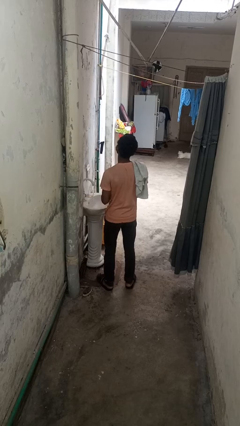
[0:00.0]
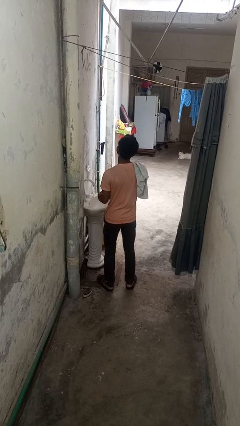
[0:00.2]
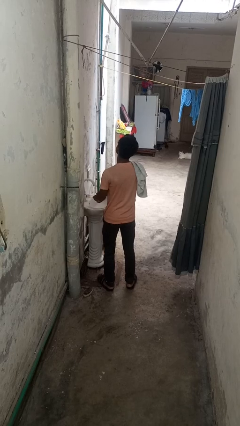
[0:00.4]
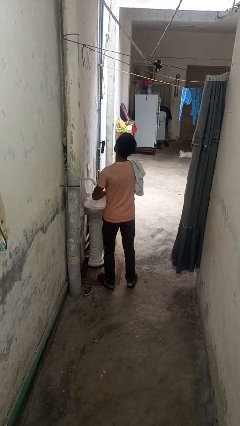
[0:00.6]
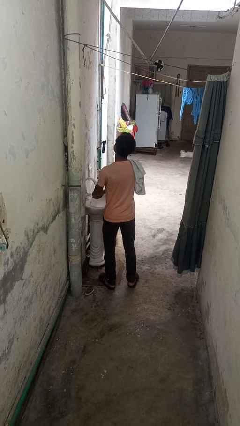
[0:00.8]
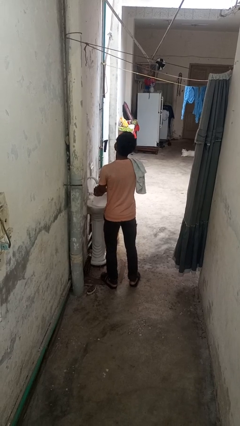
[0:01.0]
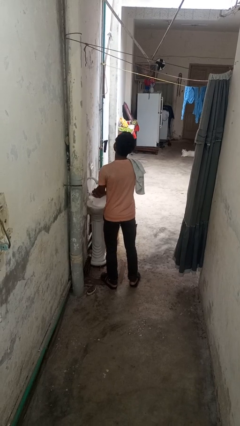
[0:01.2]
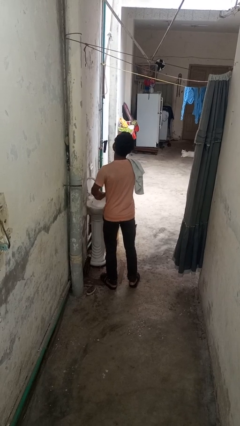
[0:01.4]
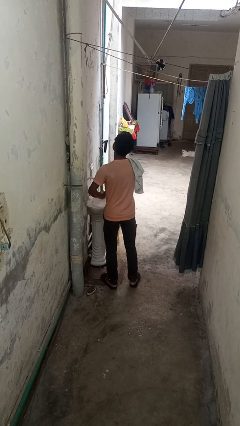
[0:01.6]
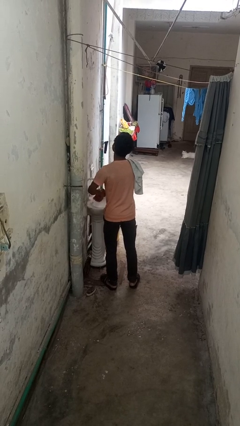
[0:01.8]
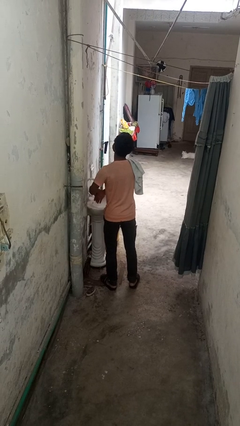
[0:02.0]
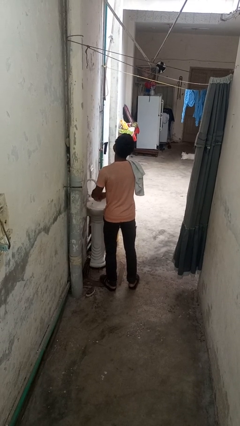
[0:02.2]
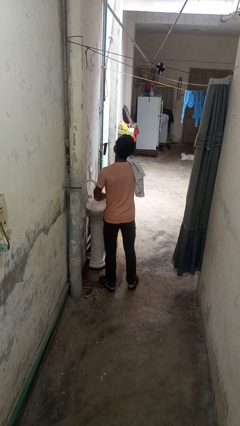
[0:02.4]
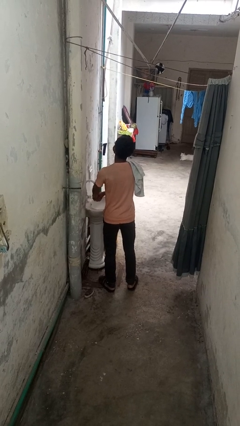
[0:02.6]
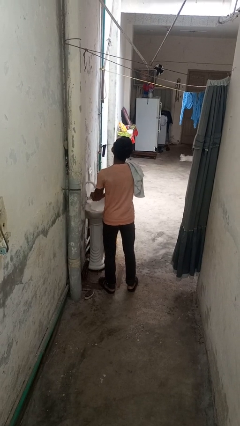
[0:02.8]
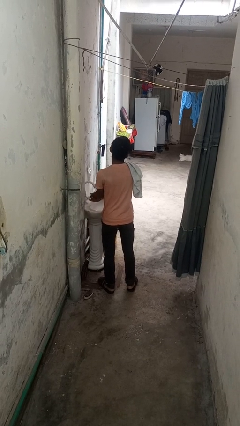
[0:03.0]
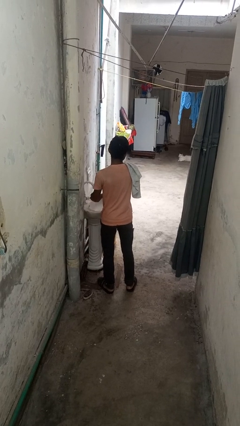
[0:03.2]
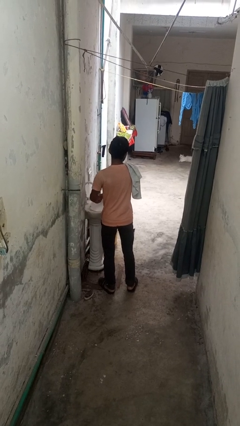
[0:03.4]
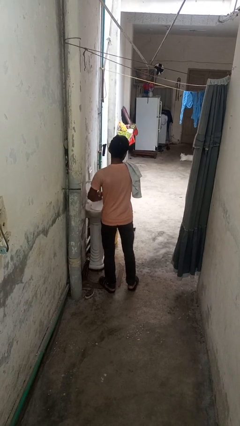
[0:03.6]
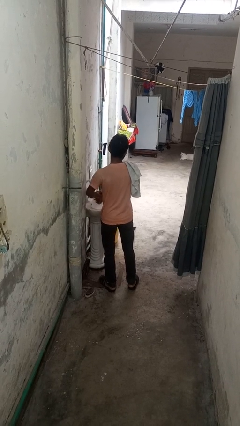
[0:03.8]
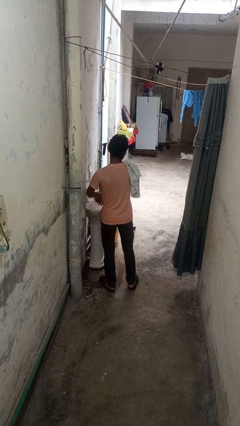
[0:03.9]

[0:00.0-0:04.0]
person washes hands

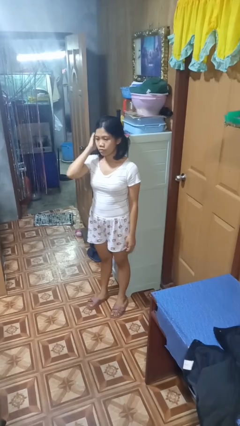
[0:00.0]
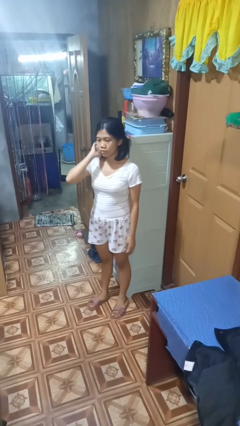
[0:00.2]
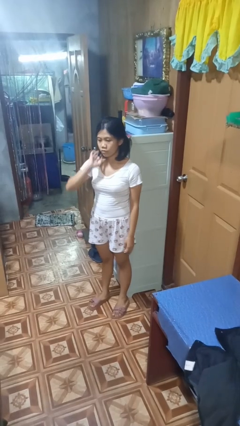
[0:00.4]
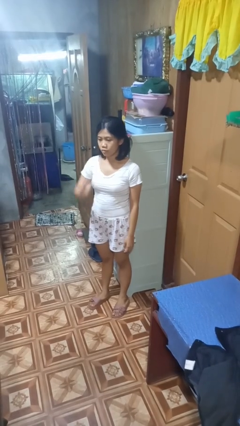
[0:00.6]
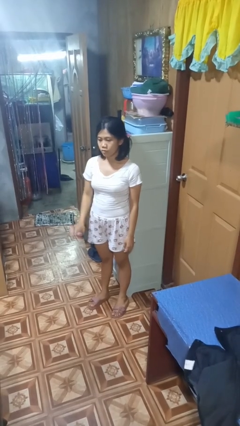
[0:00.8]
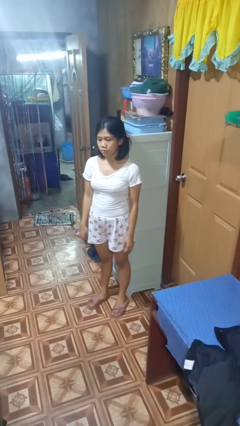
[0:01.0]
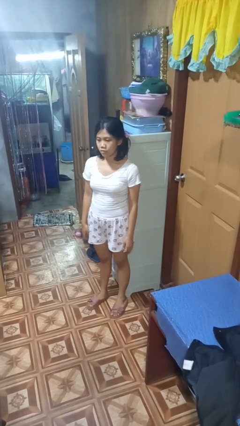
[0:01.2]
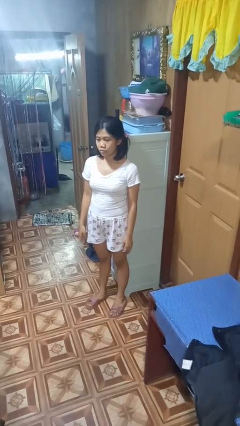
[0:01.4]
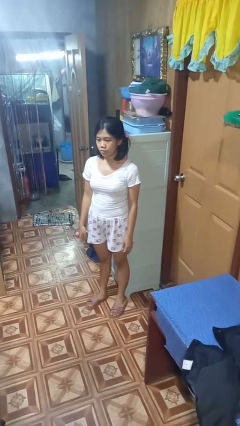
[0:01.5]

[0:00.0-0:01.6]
person strokes hair

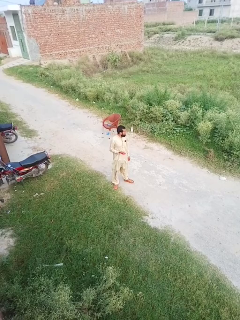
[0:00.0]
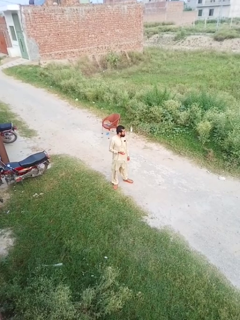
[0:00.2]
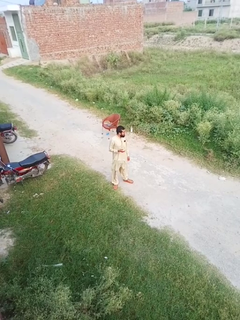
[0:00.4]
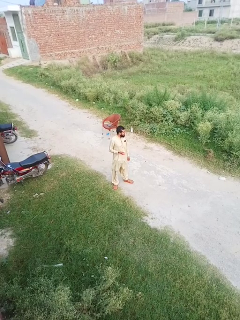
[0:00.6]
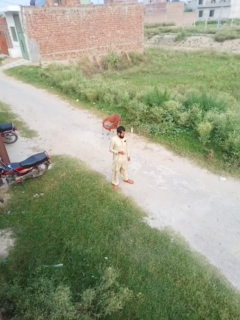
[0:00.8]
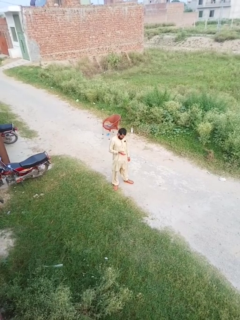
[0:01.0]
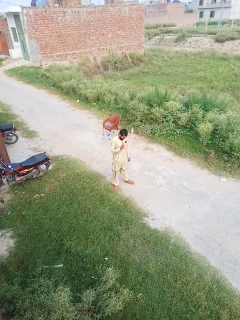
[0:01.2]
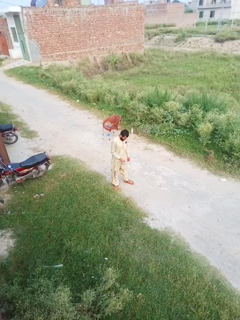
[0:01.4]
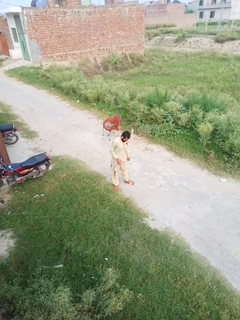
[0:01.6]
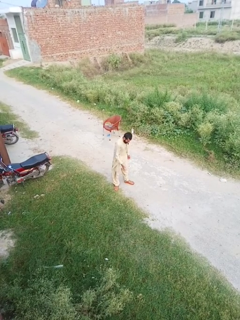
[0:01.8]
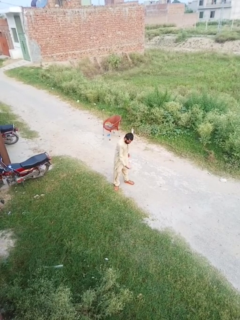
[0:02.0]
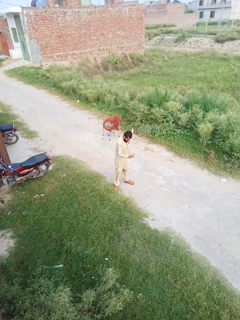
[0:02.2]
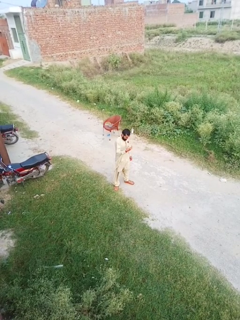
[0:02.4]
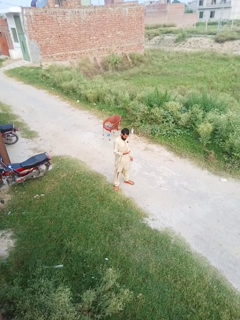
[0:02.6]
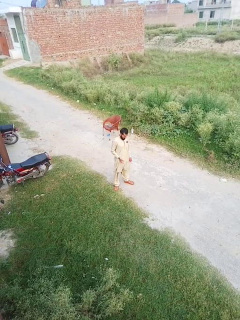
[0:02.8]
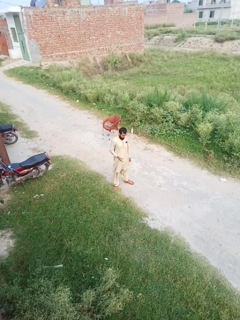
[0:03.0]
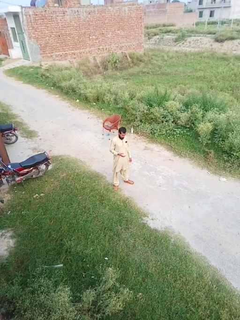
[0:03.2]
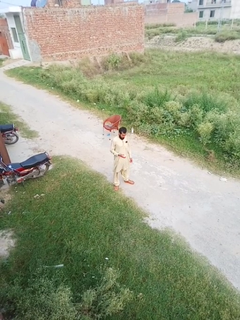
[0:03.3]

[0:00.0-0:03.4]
person bounces ball on floor

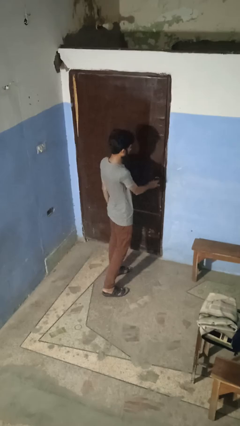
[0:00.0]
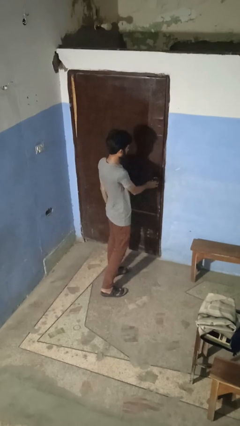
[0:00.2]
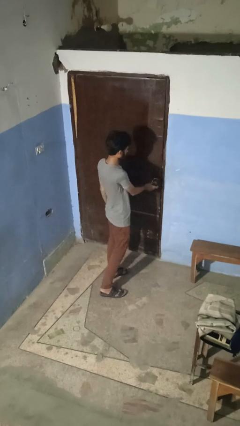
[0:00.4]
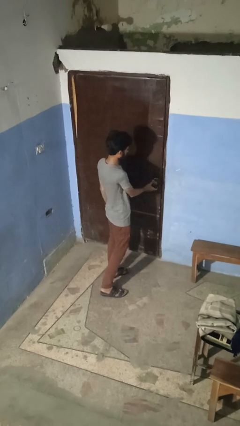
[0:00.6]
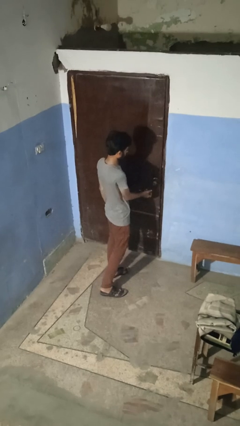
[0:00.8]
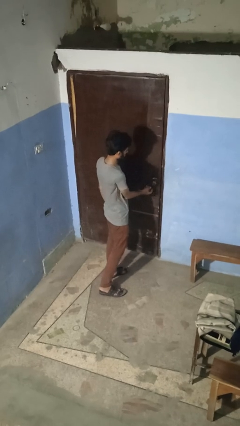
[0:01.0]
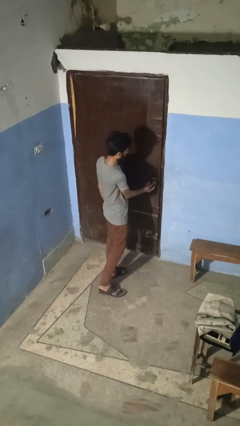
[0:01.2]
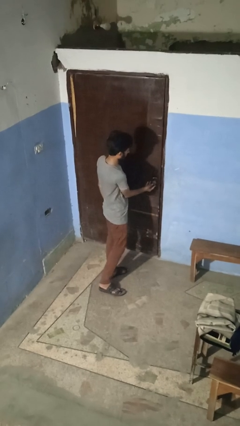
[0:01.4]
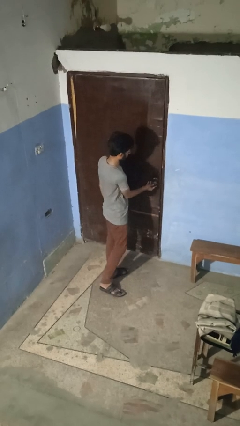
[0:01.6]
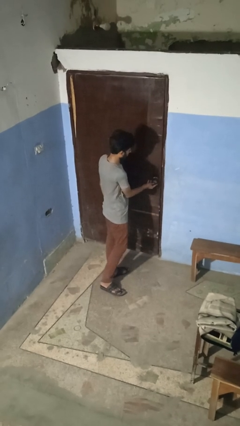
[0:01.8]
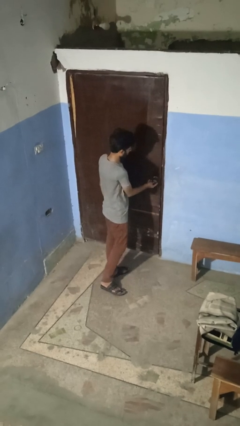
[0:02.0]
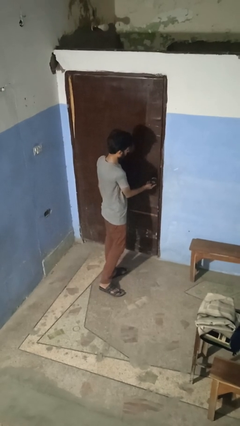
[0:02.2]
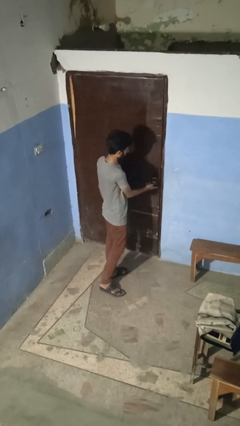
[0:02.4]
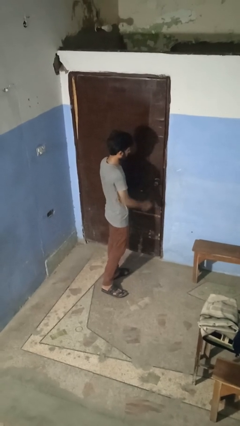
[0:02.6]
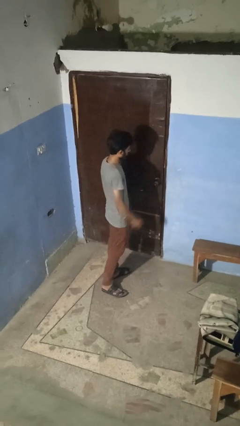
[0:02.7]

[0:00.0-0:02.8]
person locks door with keys

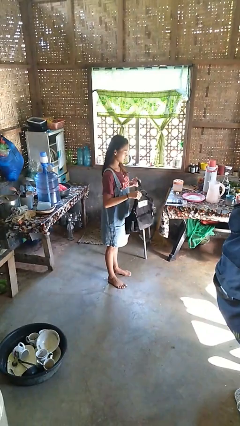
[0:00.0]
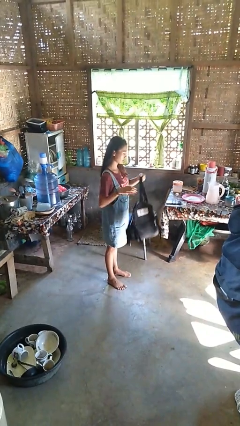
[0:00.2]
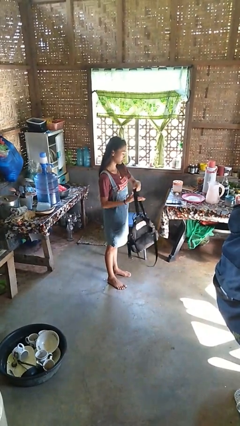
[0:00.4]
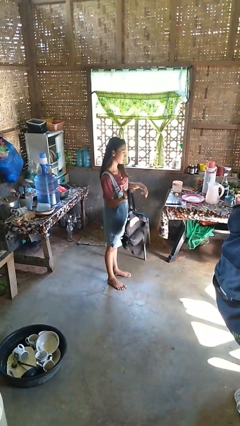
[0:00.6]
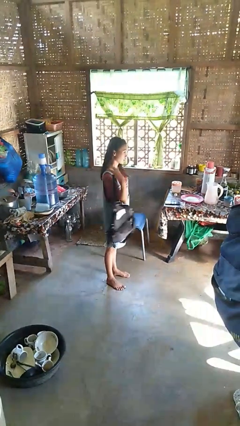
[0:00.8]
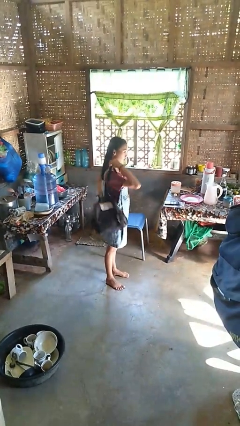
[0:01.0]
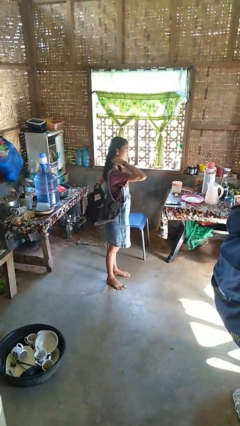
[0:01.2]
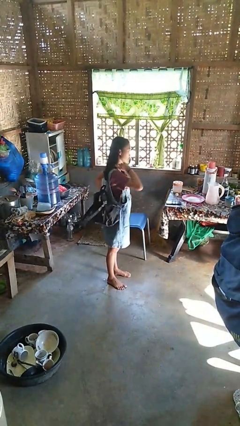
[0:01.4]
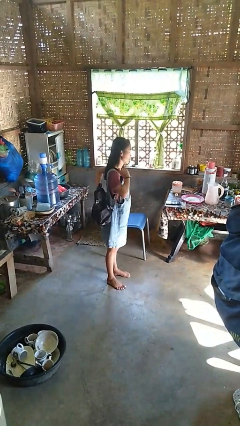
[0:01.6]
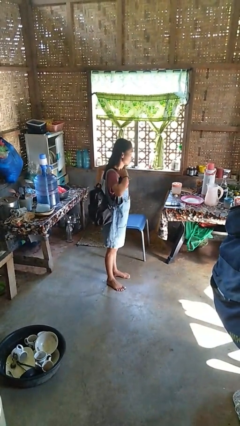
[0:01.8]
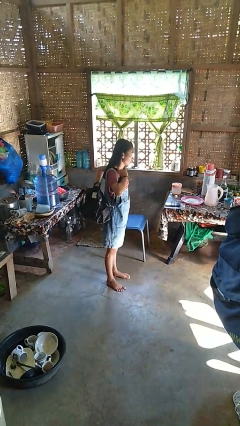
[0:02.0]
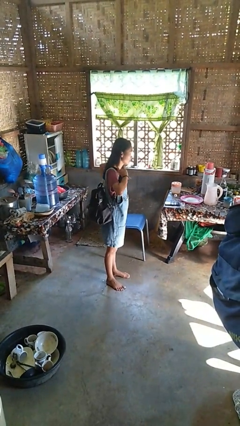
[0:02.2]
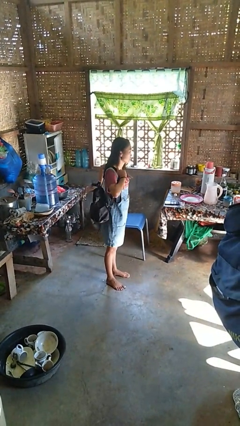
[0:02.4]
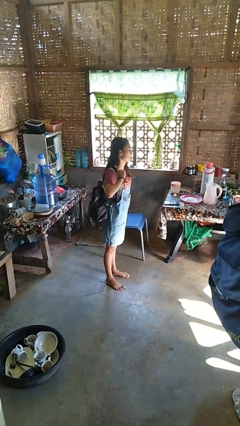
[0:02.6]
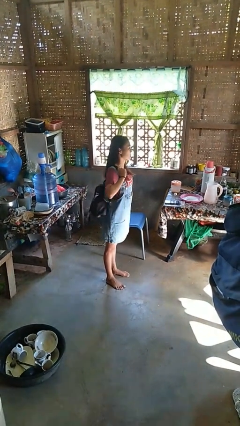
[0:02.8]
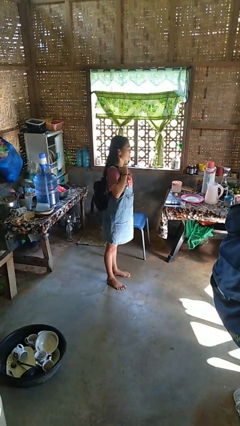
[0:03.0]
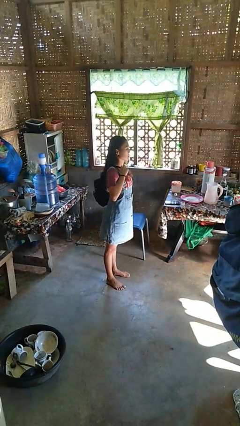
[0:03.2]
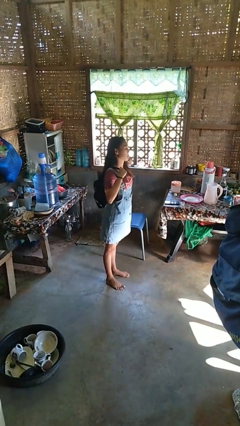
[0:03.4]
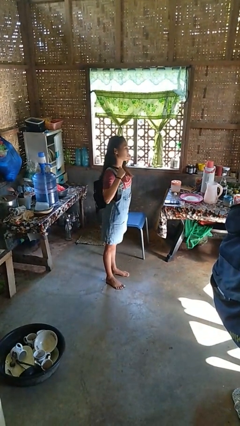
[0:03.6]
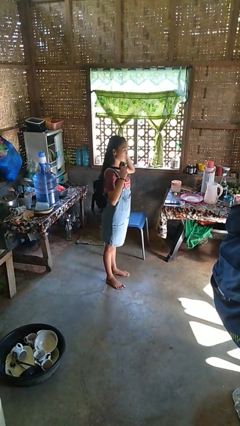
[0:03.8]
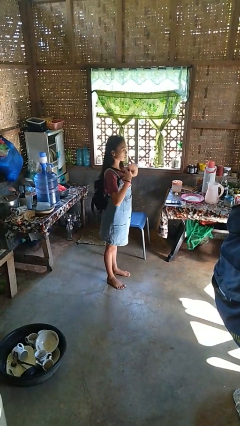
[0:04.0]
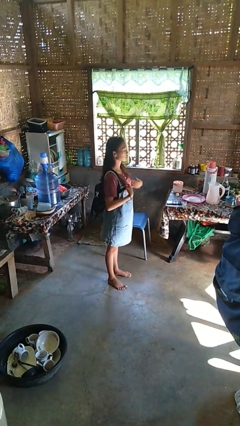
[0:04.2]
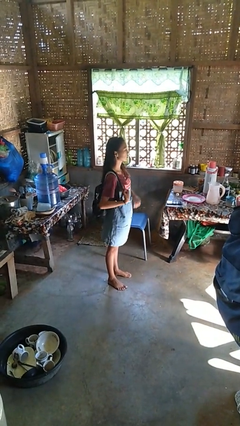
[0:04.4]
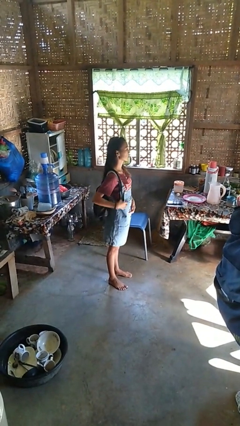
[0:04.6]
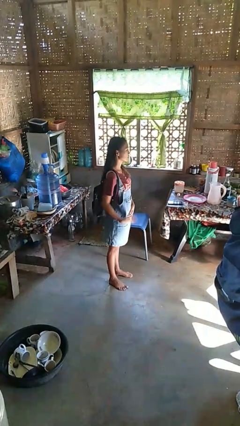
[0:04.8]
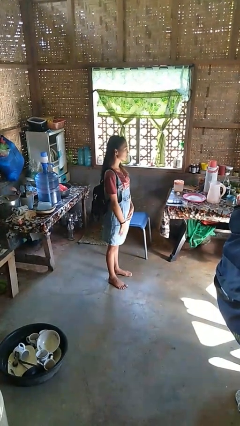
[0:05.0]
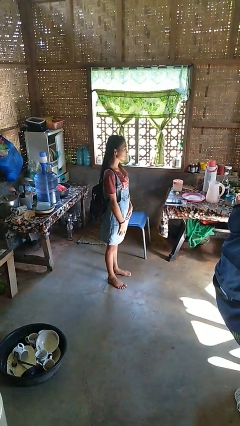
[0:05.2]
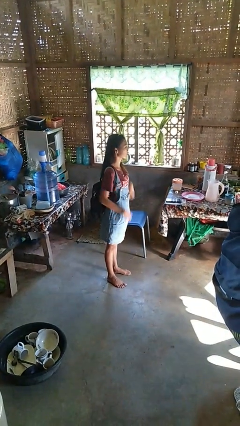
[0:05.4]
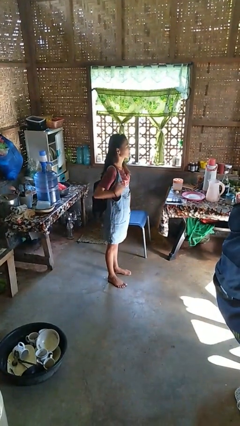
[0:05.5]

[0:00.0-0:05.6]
person puts on backpack

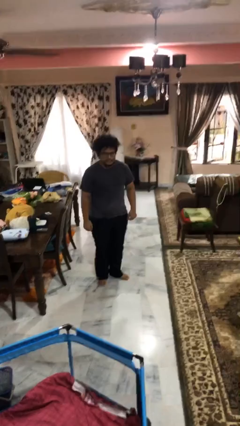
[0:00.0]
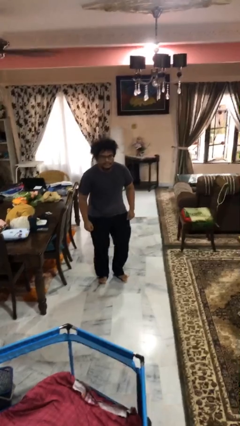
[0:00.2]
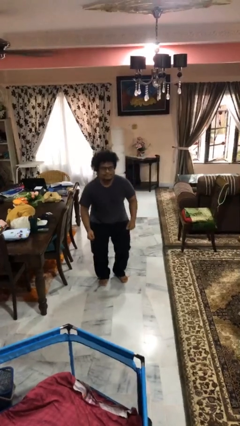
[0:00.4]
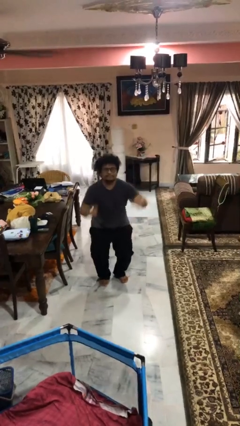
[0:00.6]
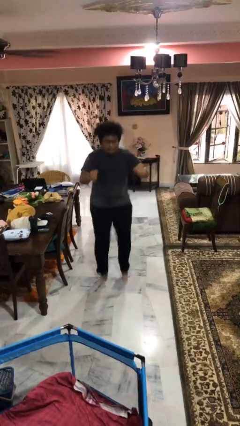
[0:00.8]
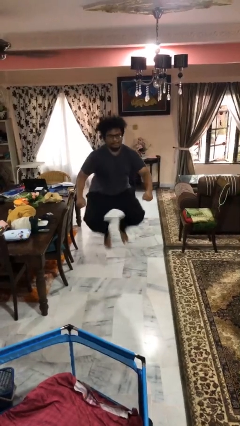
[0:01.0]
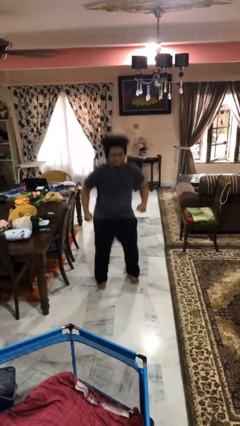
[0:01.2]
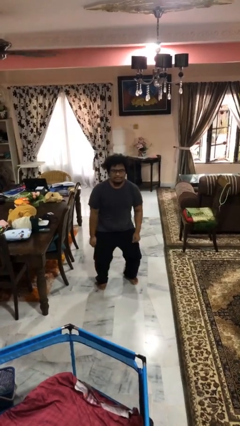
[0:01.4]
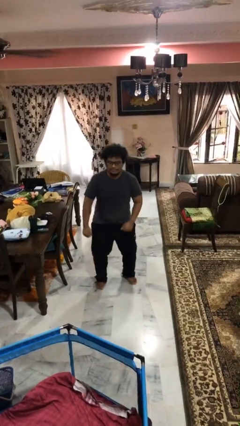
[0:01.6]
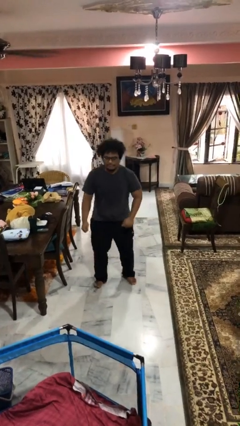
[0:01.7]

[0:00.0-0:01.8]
person jumps
